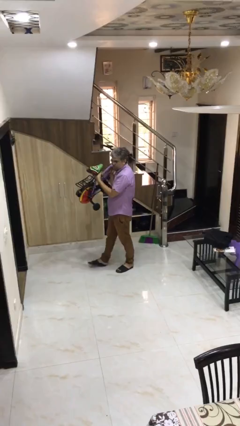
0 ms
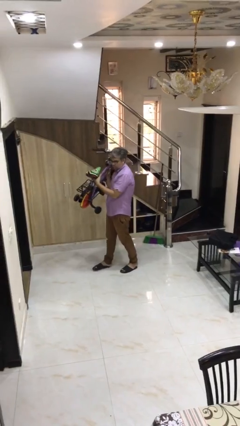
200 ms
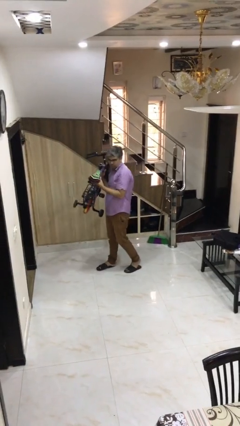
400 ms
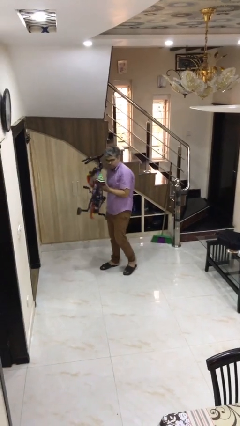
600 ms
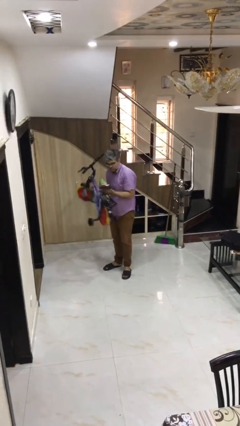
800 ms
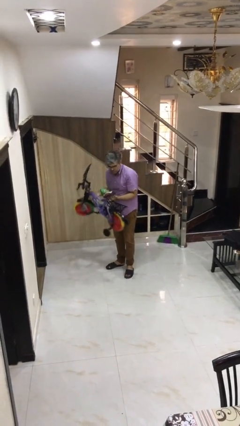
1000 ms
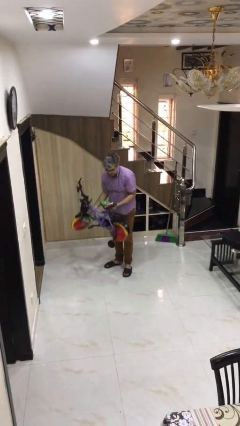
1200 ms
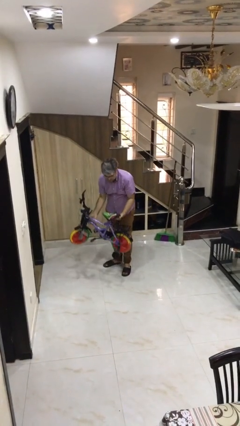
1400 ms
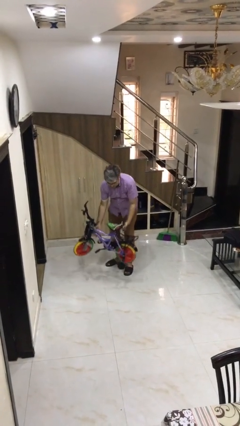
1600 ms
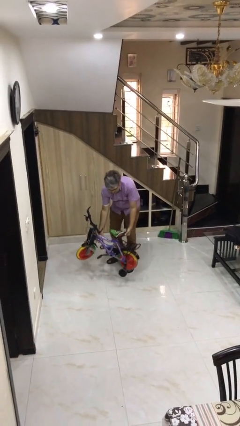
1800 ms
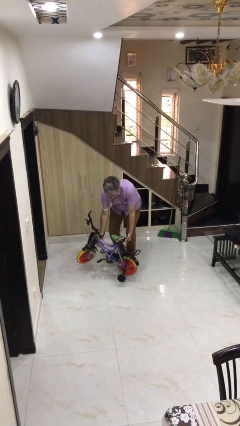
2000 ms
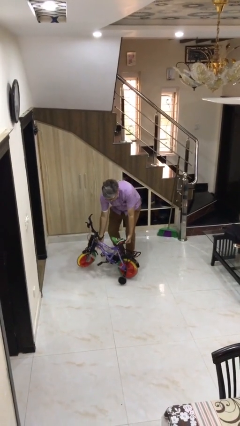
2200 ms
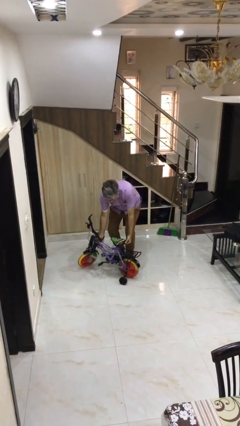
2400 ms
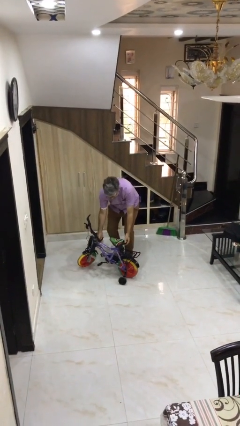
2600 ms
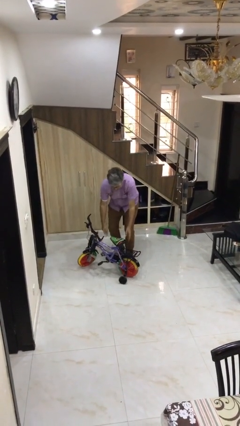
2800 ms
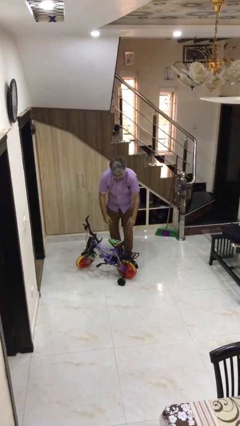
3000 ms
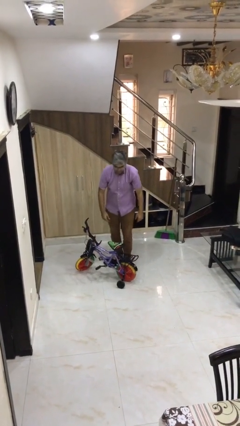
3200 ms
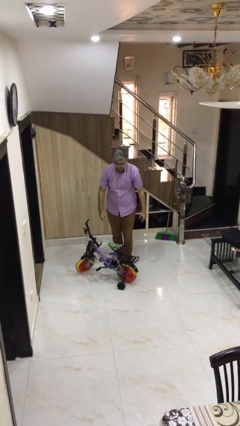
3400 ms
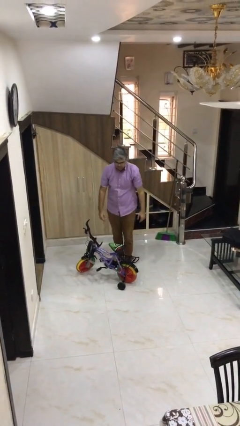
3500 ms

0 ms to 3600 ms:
person puts down object on floor

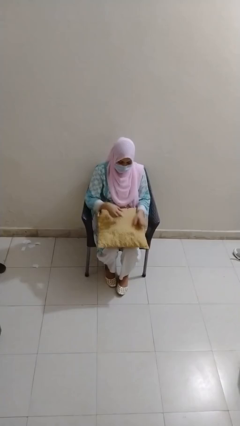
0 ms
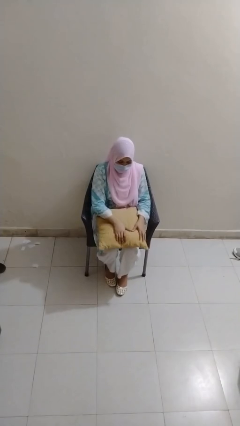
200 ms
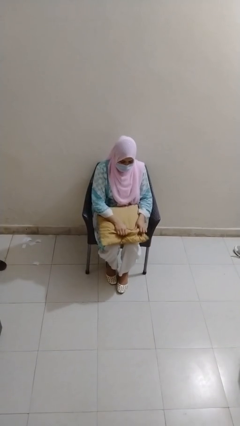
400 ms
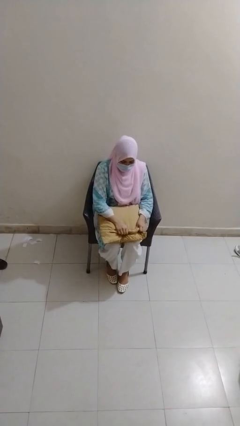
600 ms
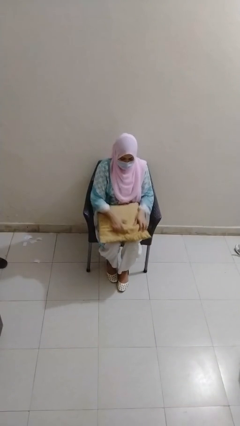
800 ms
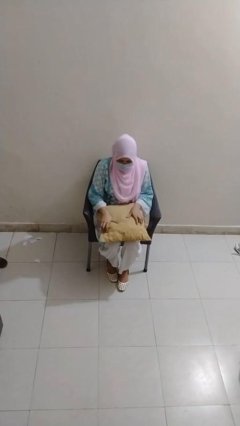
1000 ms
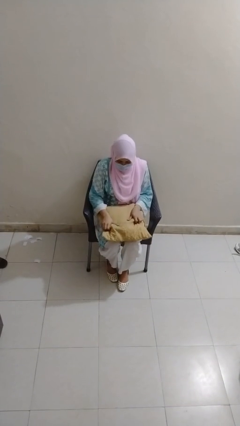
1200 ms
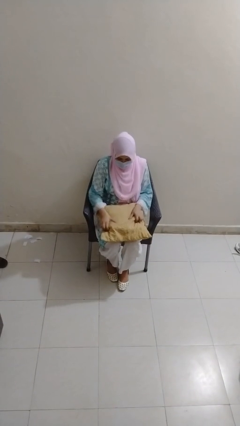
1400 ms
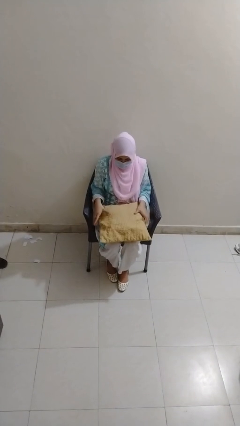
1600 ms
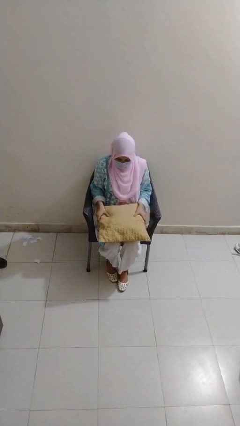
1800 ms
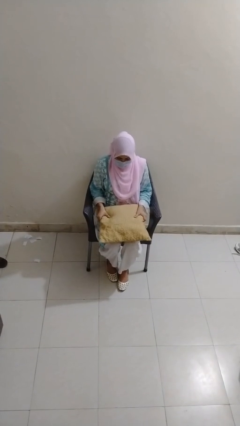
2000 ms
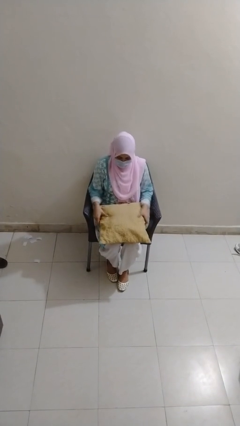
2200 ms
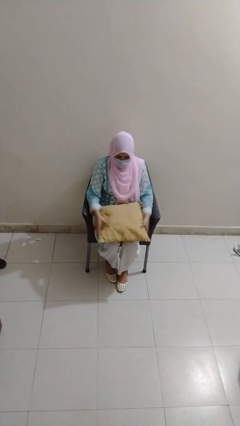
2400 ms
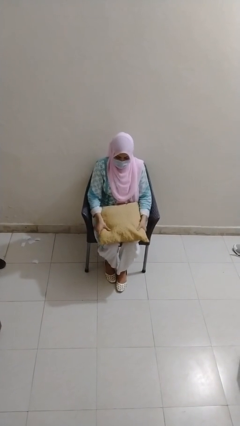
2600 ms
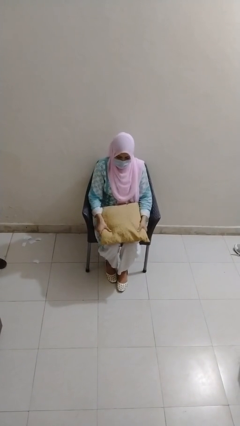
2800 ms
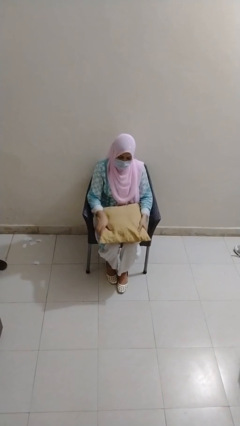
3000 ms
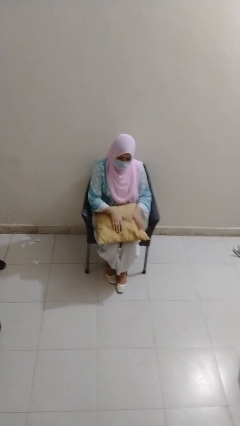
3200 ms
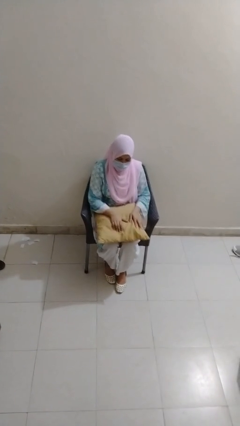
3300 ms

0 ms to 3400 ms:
person squeezes object

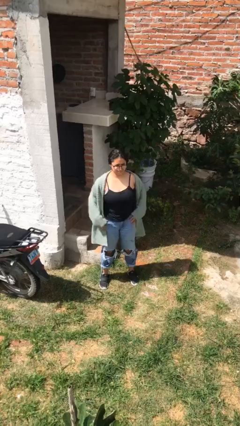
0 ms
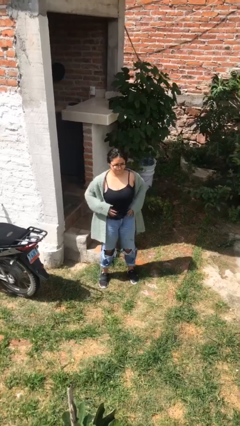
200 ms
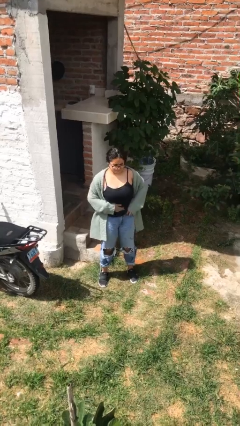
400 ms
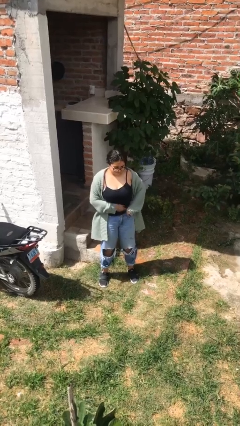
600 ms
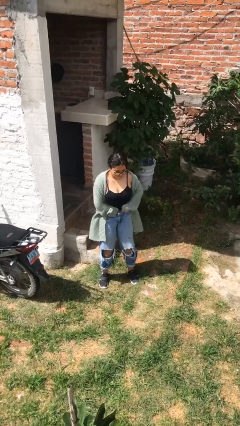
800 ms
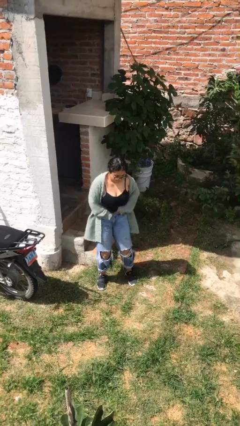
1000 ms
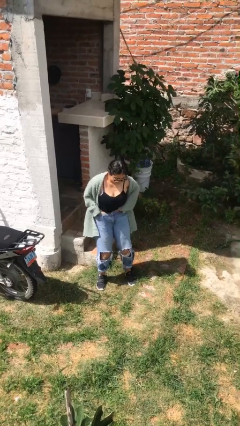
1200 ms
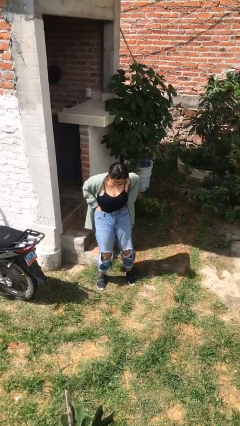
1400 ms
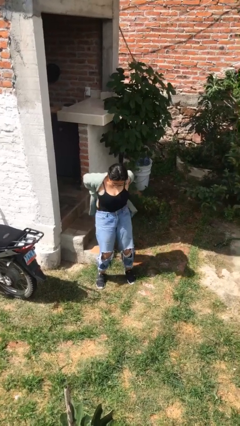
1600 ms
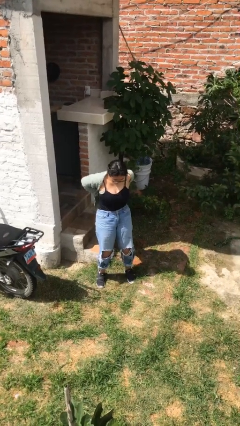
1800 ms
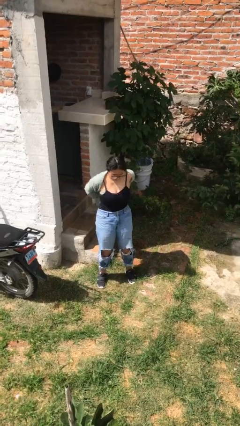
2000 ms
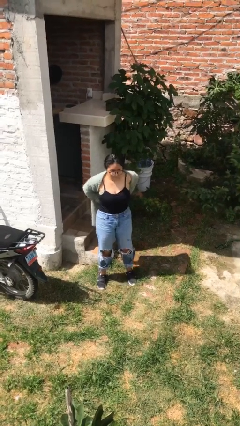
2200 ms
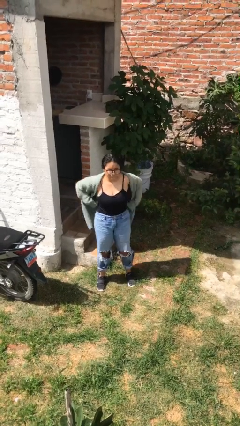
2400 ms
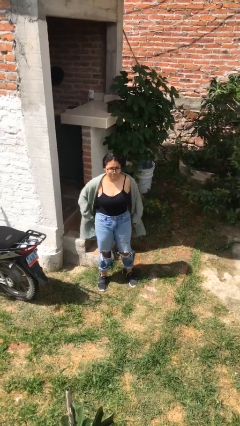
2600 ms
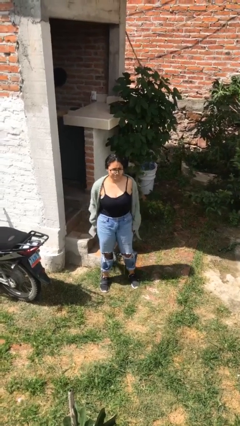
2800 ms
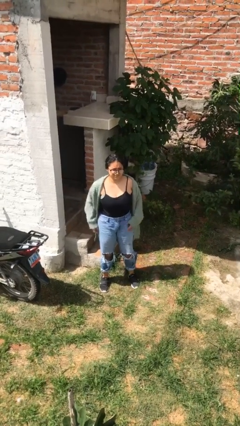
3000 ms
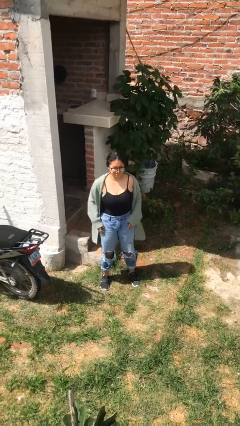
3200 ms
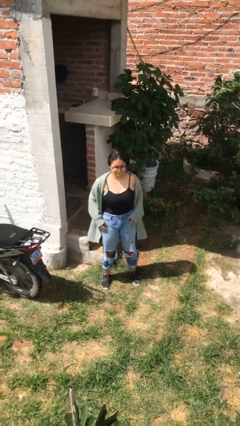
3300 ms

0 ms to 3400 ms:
person tucks in shirt

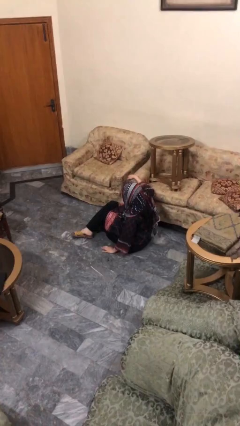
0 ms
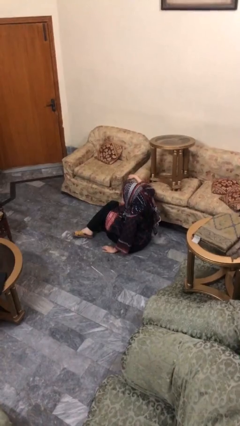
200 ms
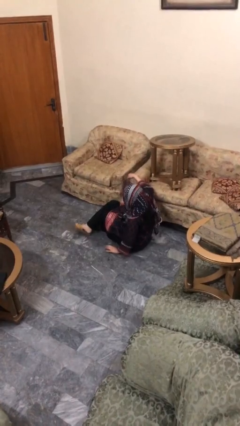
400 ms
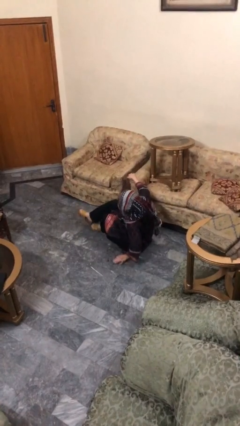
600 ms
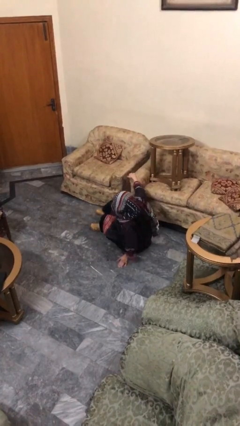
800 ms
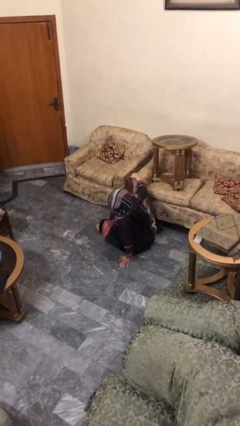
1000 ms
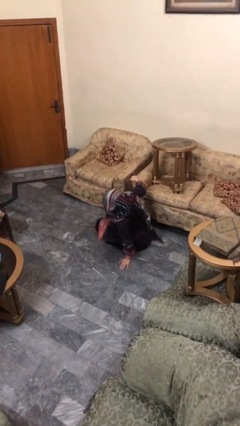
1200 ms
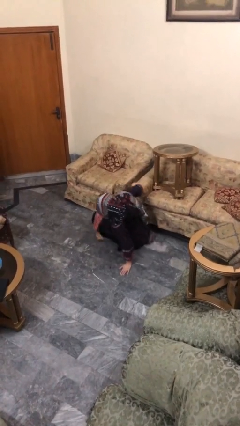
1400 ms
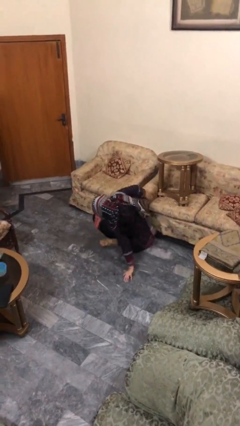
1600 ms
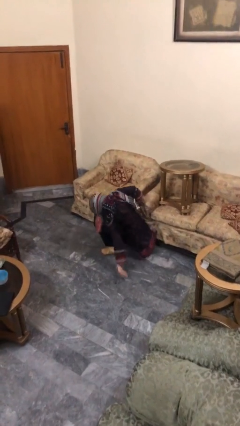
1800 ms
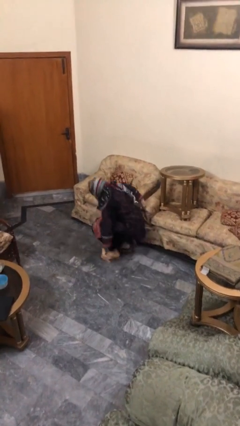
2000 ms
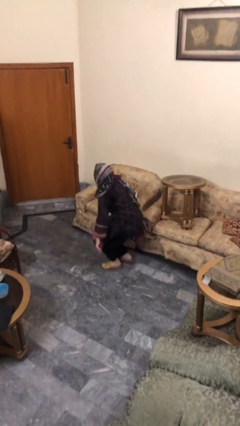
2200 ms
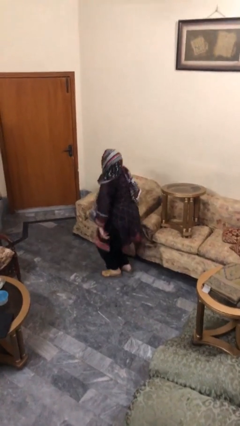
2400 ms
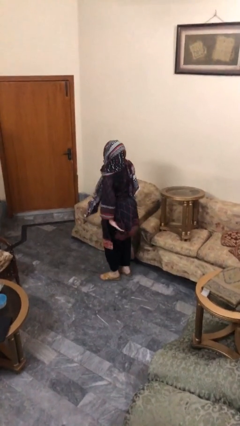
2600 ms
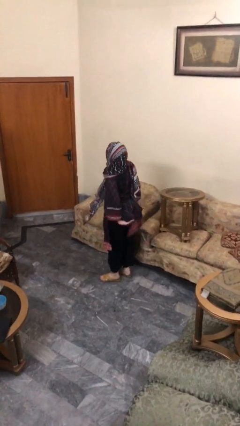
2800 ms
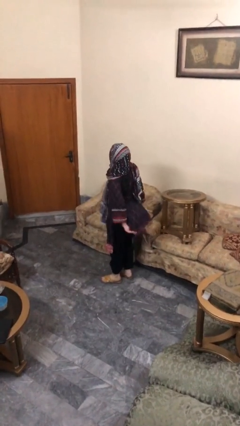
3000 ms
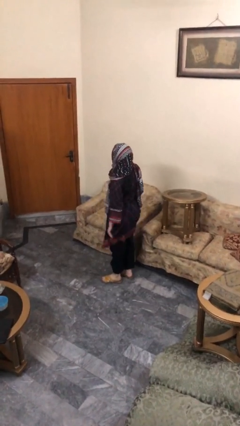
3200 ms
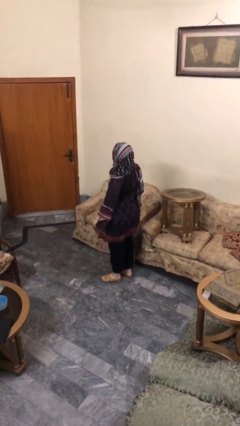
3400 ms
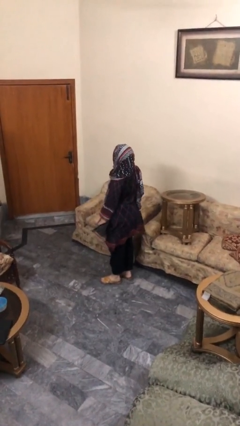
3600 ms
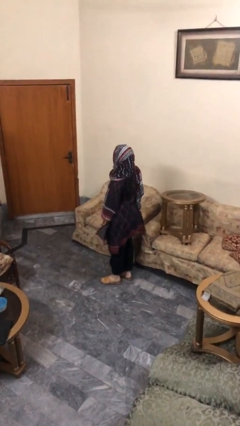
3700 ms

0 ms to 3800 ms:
person stands up from floor

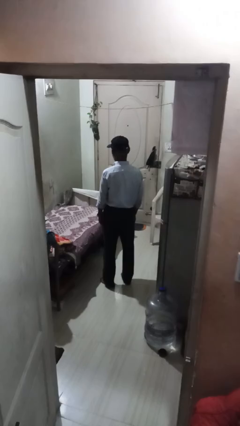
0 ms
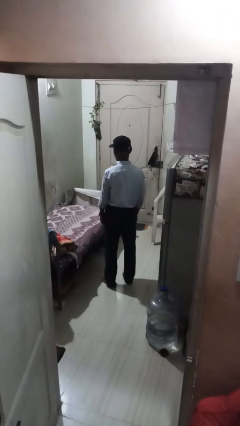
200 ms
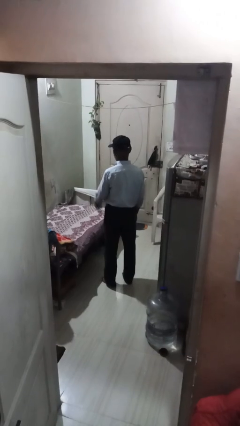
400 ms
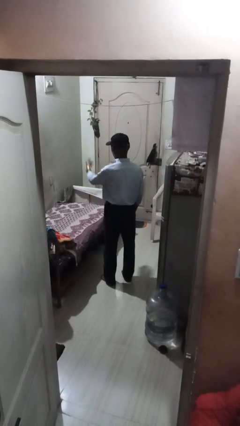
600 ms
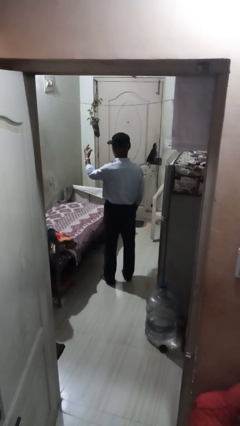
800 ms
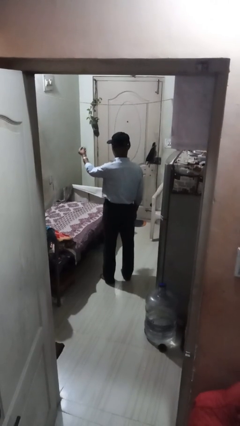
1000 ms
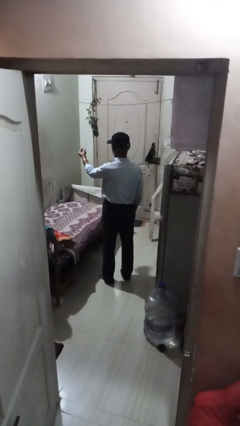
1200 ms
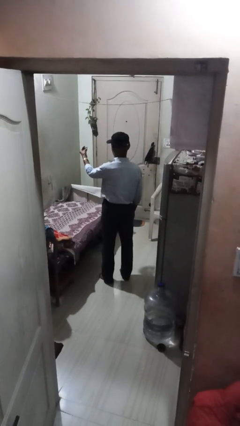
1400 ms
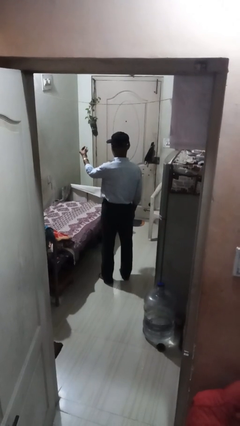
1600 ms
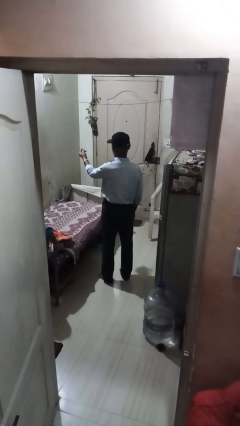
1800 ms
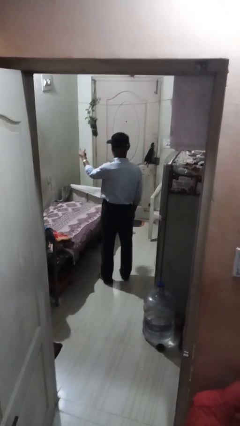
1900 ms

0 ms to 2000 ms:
person snaps fingers

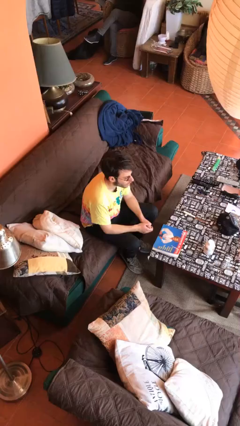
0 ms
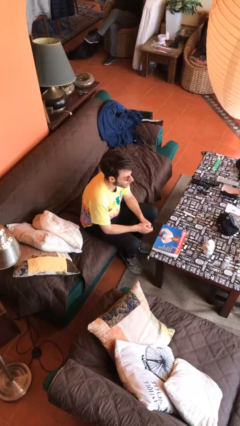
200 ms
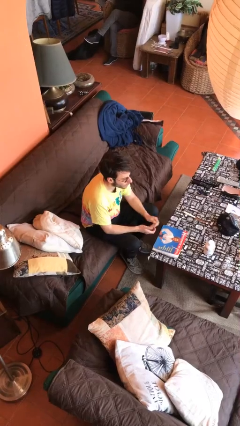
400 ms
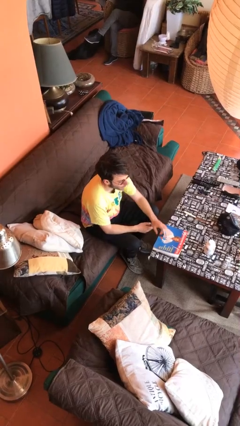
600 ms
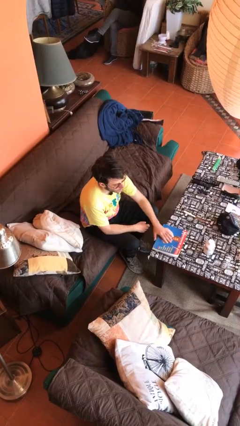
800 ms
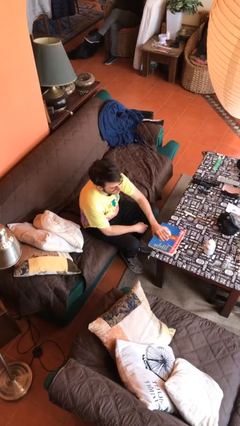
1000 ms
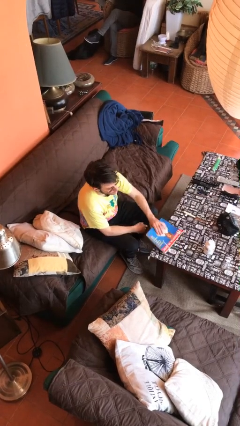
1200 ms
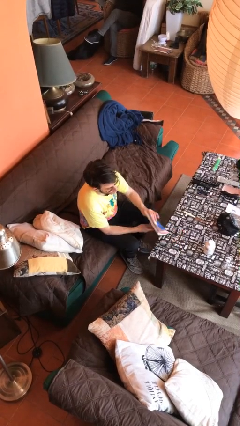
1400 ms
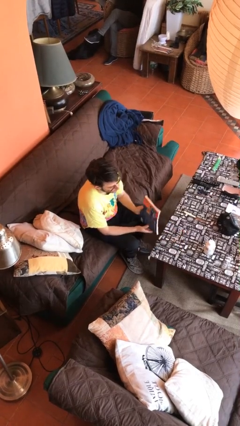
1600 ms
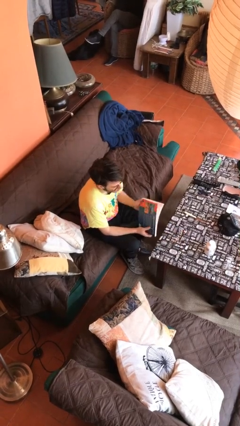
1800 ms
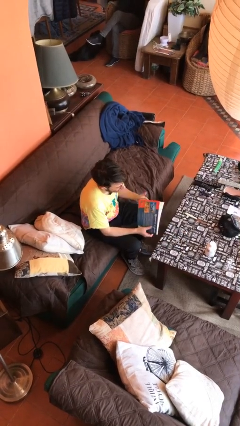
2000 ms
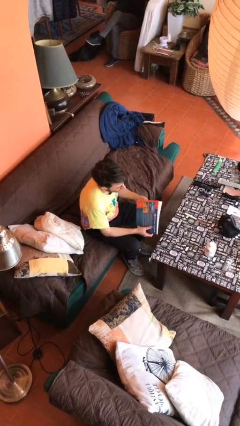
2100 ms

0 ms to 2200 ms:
person picks up object from table
